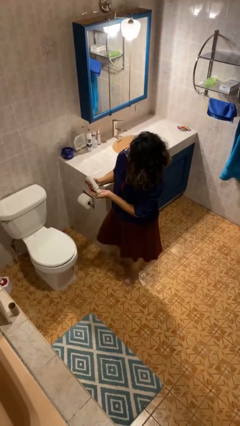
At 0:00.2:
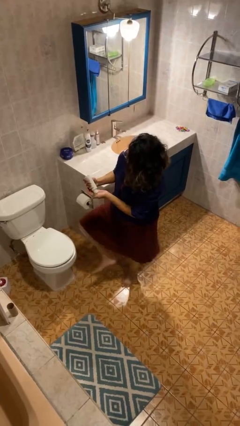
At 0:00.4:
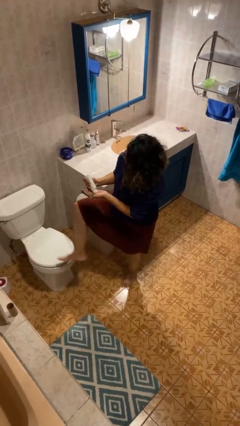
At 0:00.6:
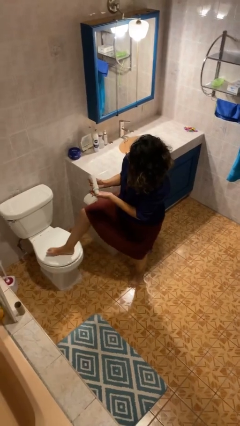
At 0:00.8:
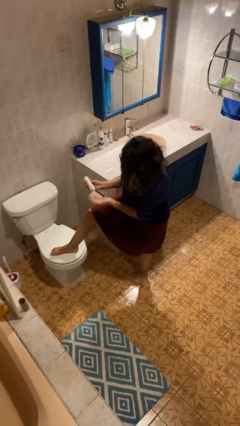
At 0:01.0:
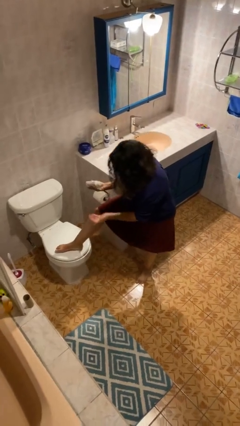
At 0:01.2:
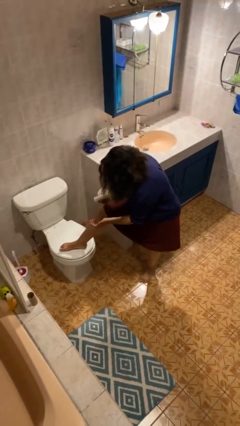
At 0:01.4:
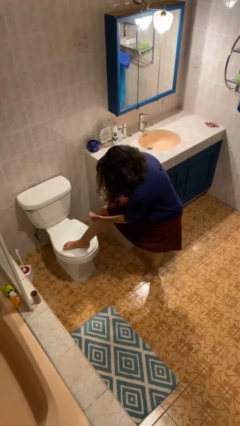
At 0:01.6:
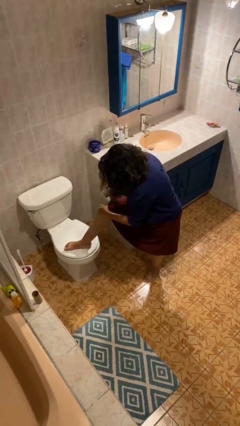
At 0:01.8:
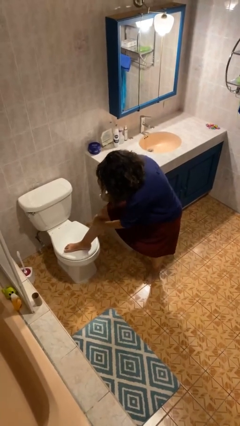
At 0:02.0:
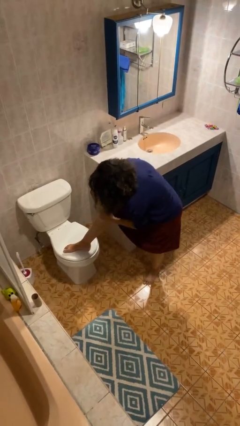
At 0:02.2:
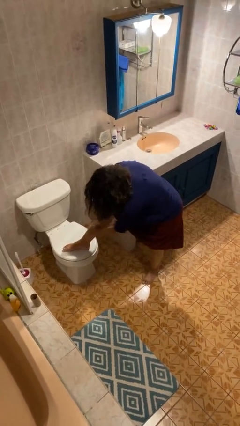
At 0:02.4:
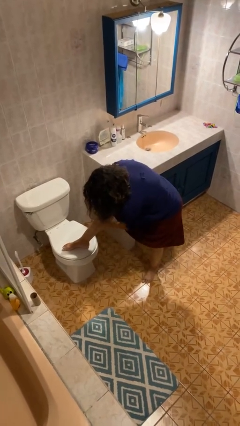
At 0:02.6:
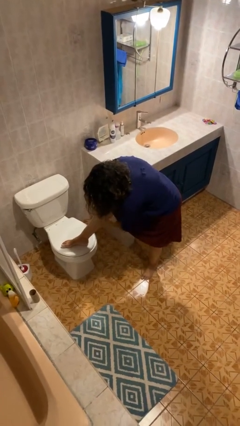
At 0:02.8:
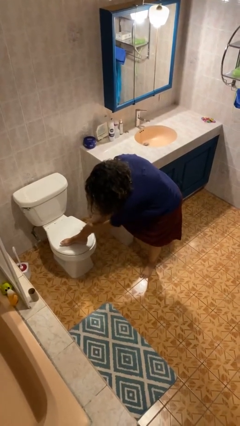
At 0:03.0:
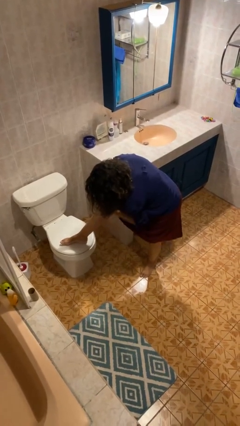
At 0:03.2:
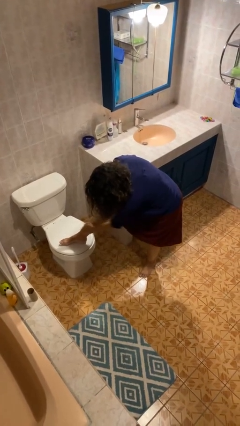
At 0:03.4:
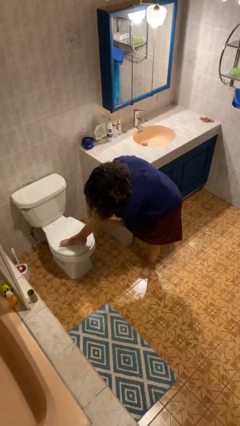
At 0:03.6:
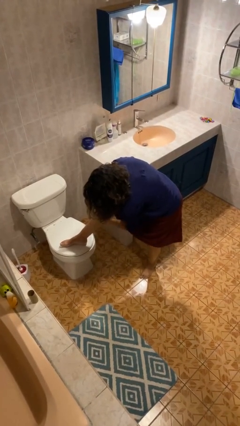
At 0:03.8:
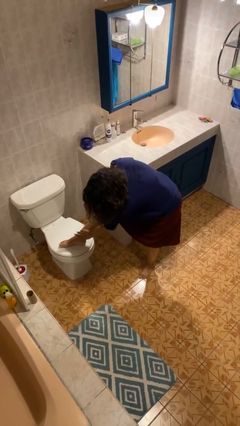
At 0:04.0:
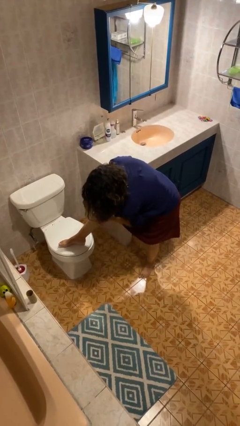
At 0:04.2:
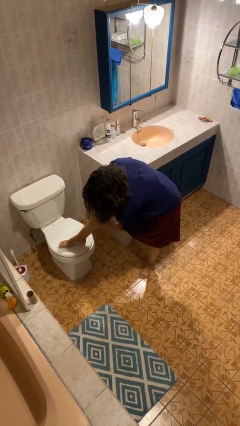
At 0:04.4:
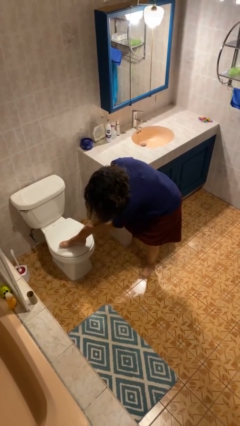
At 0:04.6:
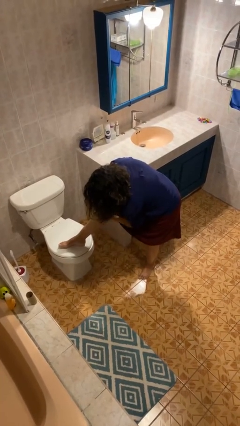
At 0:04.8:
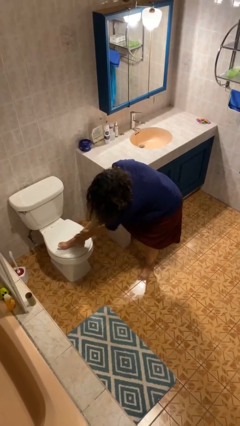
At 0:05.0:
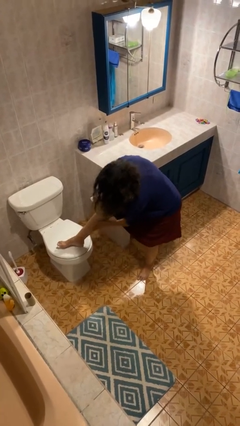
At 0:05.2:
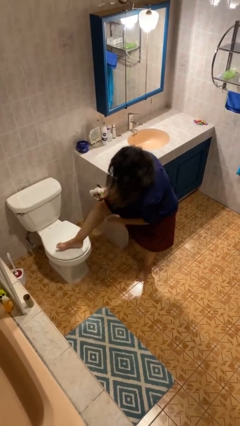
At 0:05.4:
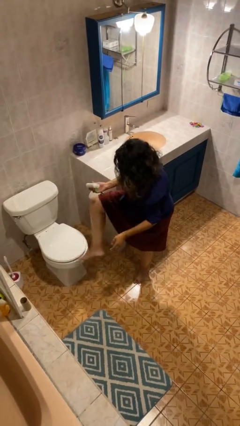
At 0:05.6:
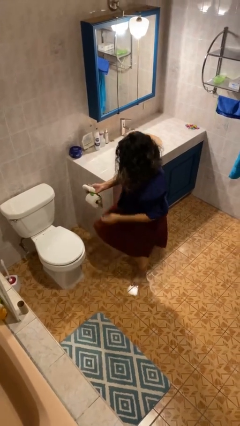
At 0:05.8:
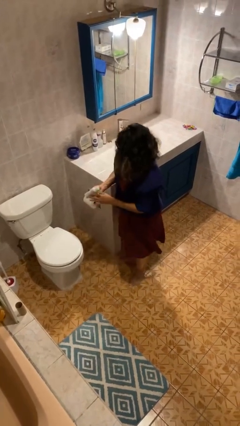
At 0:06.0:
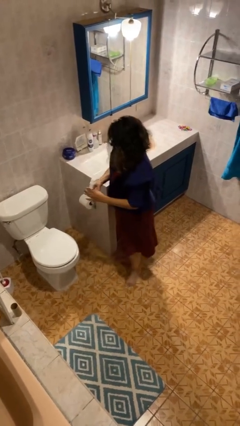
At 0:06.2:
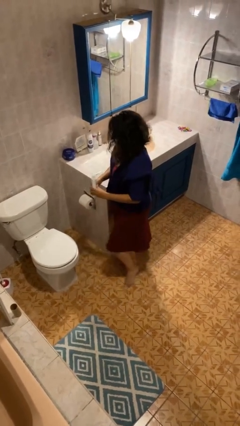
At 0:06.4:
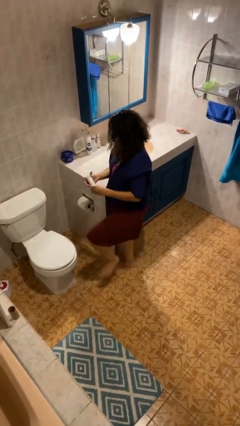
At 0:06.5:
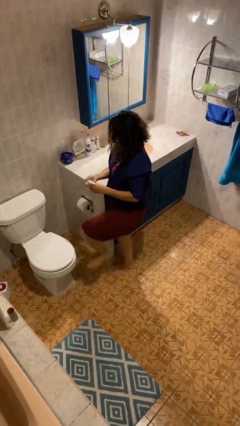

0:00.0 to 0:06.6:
person applies sunscreen

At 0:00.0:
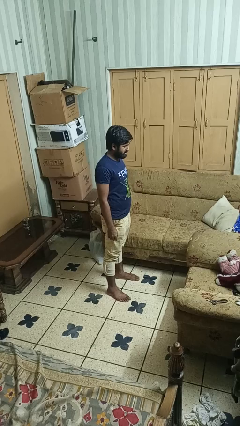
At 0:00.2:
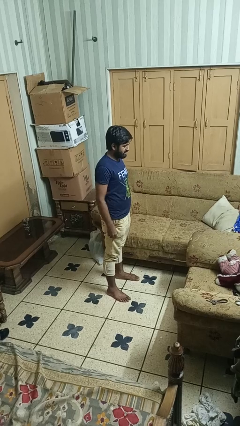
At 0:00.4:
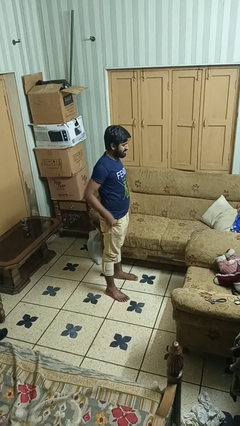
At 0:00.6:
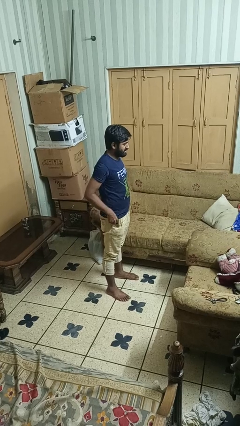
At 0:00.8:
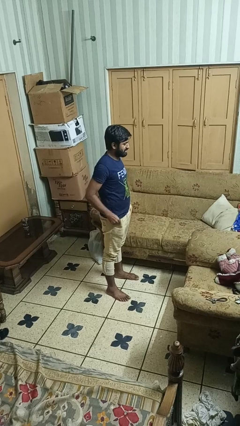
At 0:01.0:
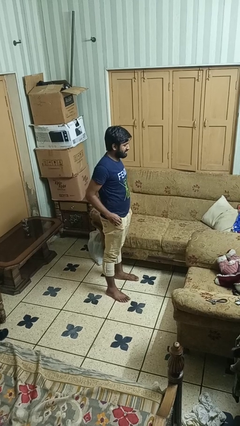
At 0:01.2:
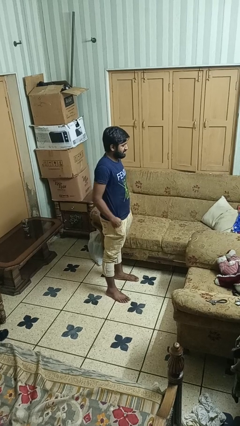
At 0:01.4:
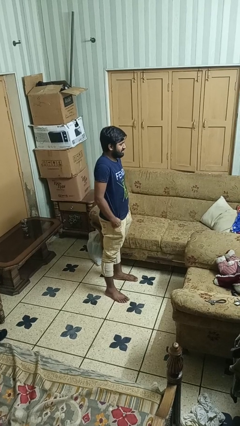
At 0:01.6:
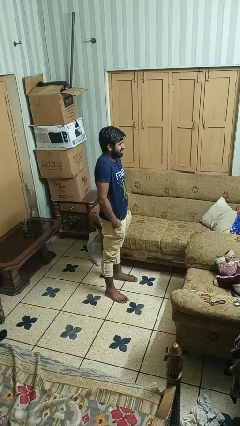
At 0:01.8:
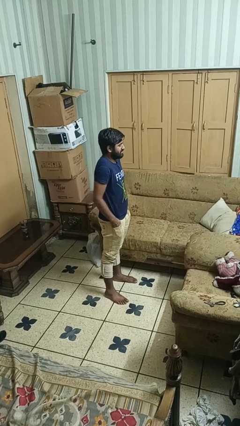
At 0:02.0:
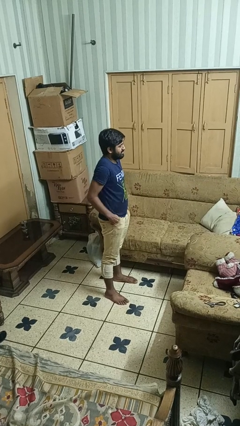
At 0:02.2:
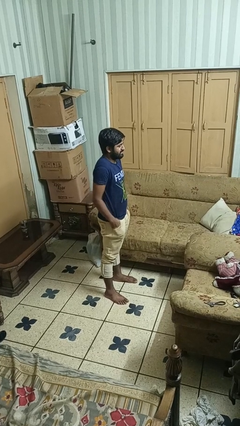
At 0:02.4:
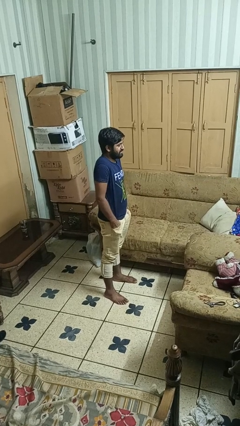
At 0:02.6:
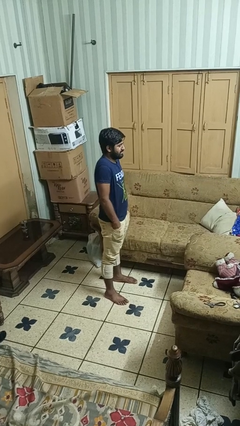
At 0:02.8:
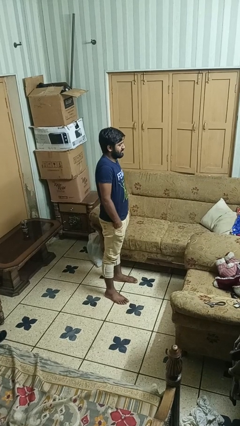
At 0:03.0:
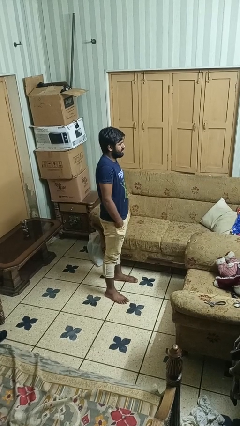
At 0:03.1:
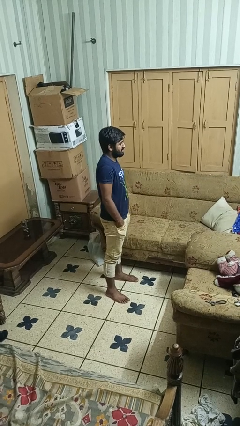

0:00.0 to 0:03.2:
person puts hands in back pockets

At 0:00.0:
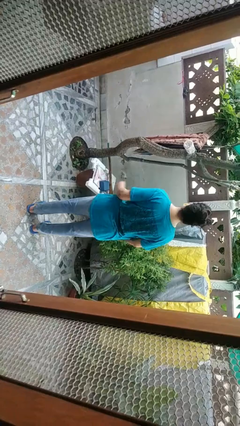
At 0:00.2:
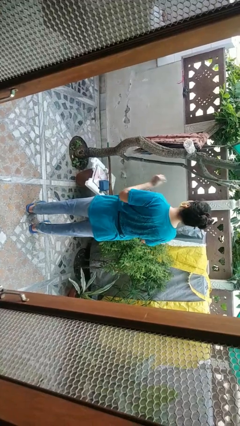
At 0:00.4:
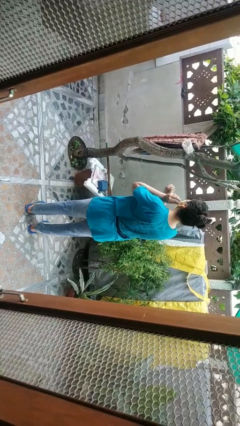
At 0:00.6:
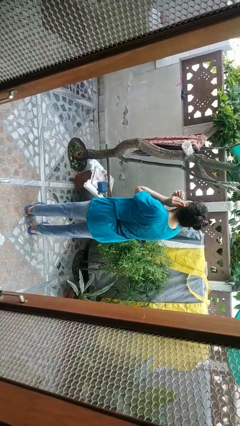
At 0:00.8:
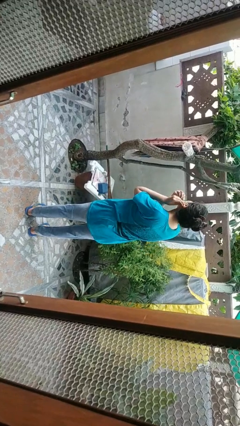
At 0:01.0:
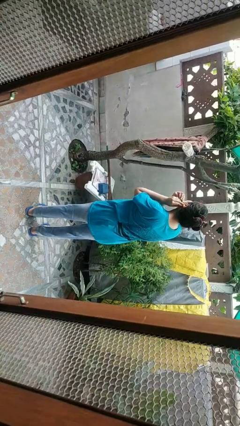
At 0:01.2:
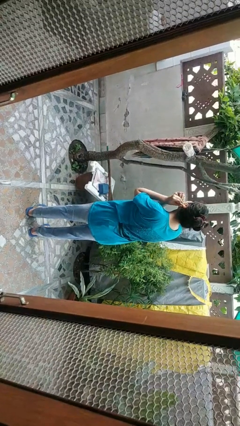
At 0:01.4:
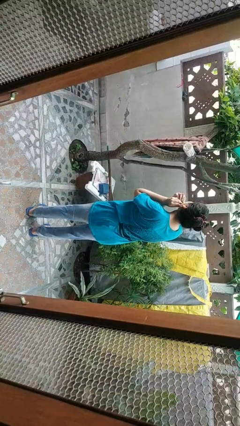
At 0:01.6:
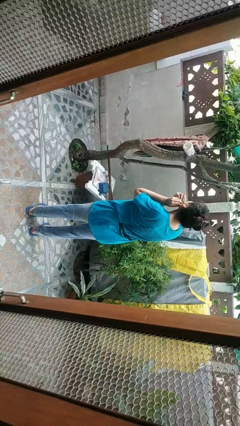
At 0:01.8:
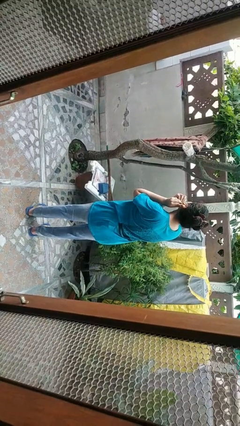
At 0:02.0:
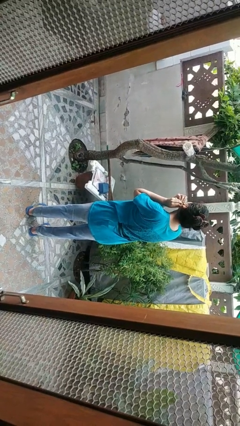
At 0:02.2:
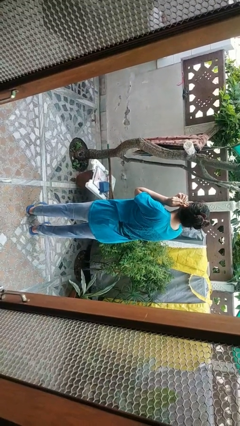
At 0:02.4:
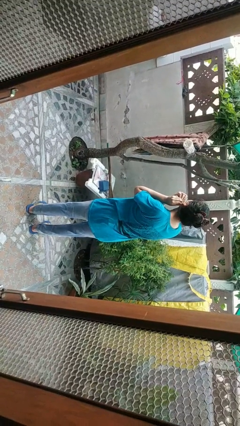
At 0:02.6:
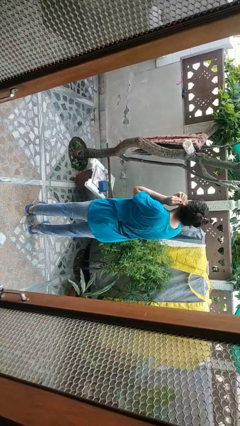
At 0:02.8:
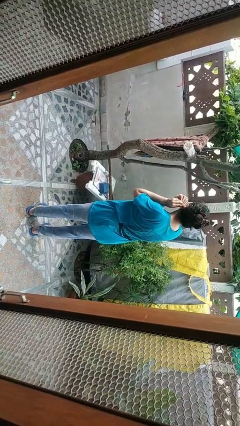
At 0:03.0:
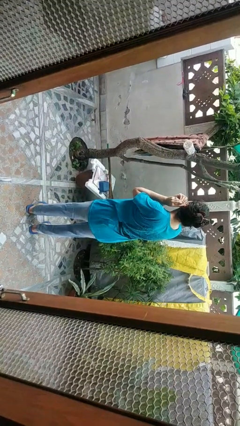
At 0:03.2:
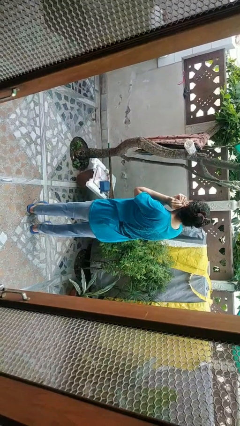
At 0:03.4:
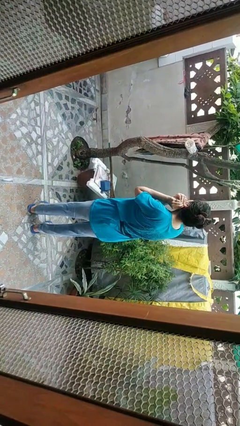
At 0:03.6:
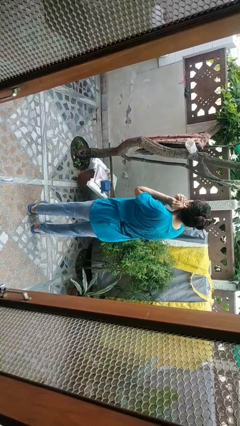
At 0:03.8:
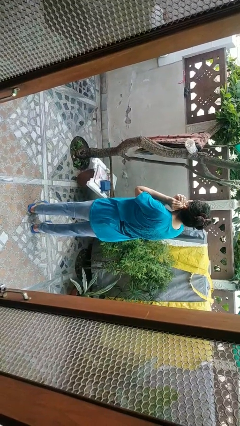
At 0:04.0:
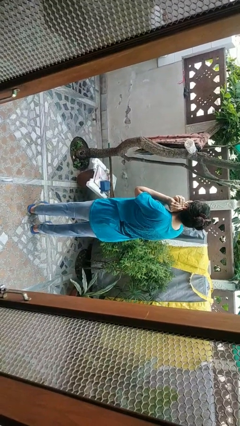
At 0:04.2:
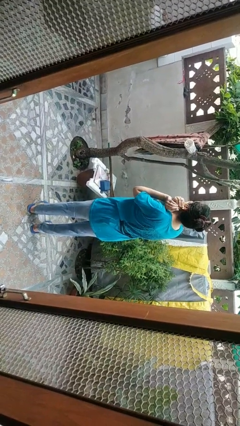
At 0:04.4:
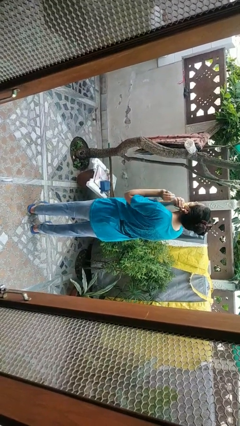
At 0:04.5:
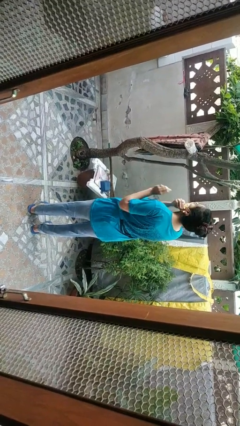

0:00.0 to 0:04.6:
person puts on earrings

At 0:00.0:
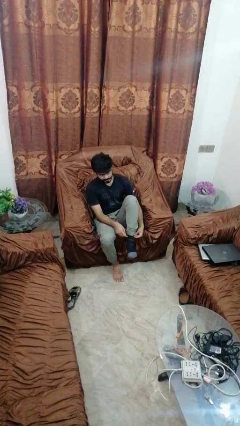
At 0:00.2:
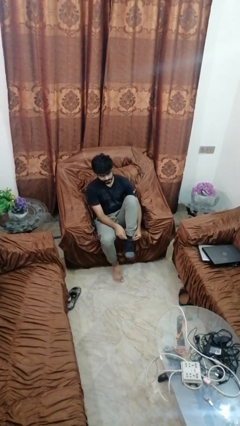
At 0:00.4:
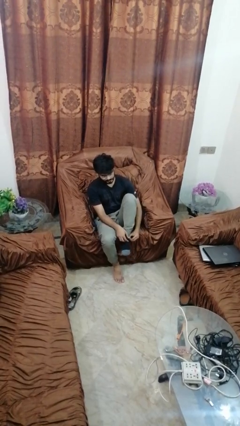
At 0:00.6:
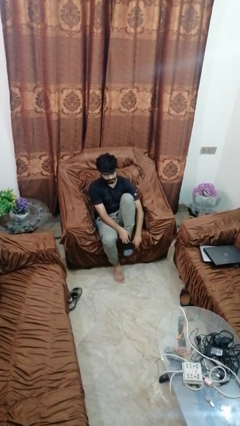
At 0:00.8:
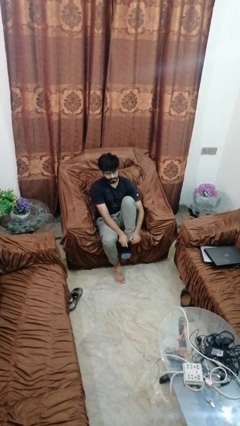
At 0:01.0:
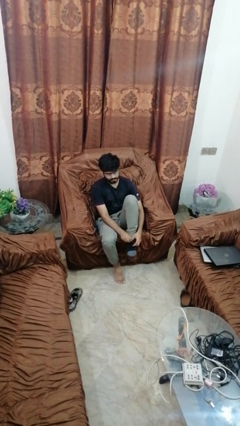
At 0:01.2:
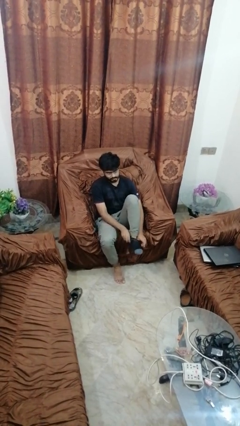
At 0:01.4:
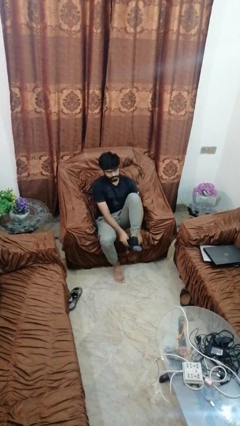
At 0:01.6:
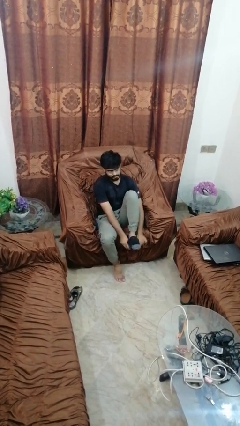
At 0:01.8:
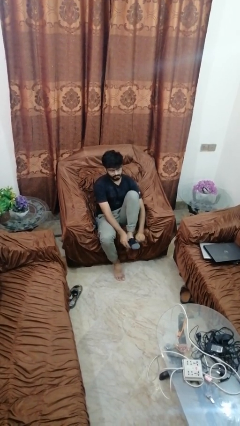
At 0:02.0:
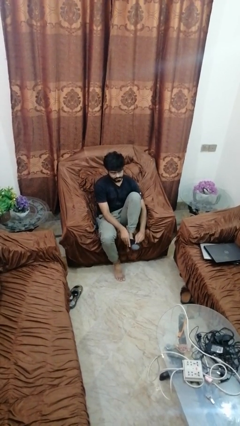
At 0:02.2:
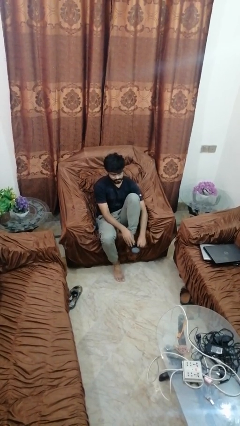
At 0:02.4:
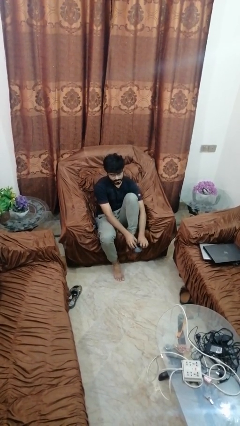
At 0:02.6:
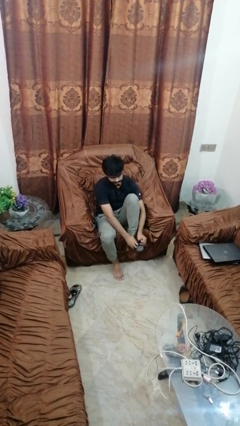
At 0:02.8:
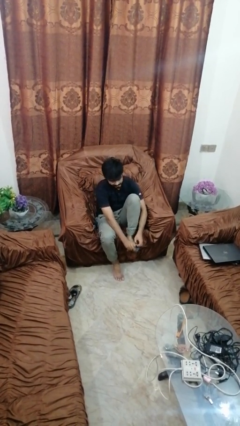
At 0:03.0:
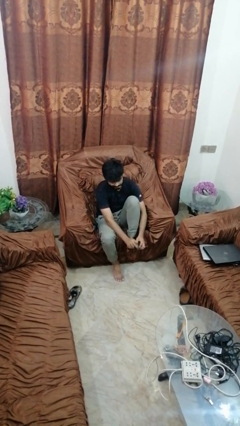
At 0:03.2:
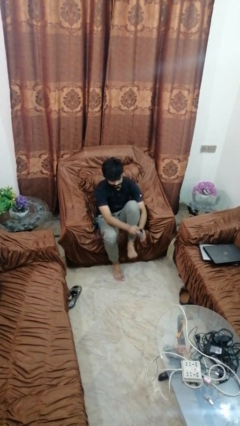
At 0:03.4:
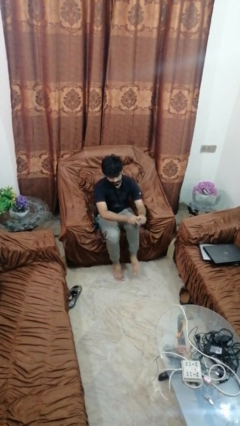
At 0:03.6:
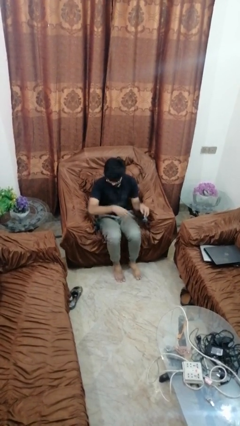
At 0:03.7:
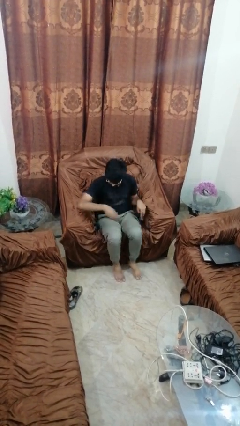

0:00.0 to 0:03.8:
person takes off socks
